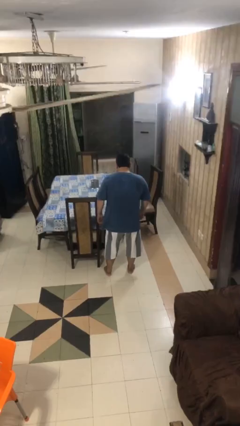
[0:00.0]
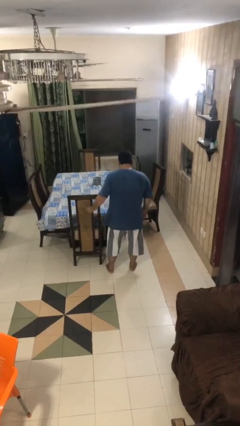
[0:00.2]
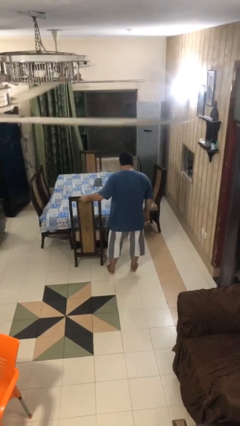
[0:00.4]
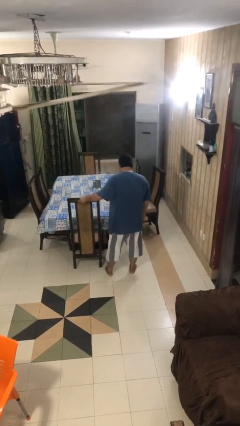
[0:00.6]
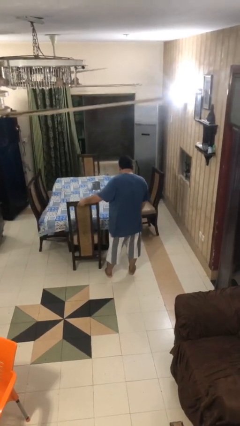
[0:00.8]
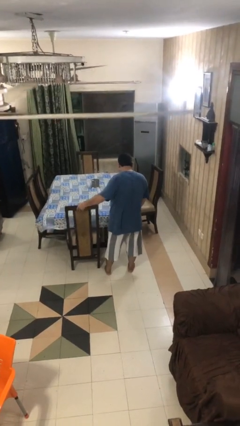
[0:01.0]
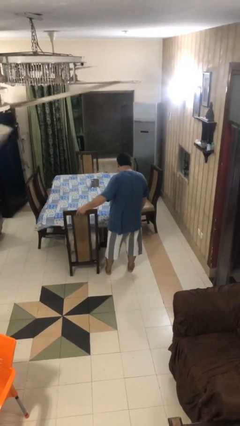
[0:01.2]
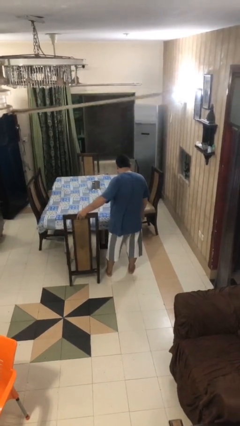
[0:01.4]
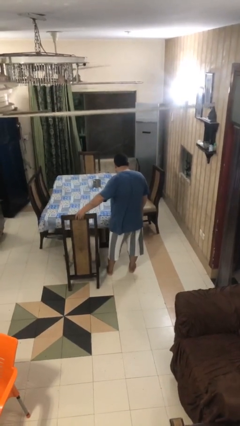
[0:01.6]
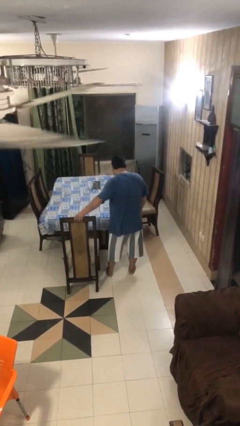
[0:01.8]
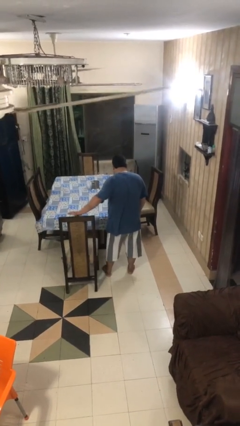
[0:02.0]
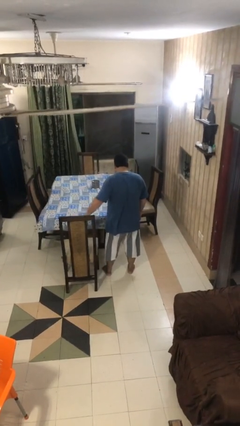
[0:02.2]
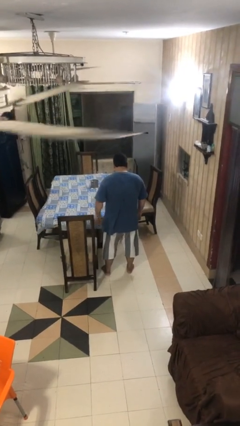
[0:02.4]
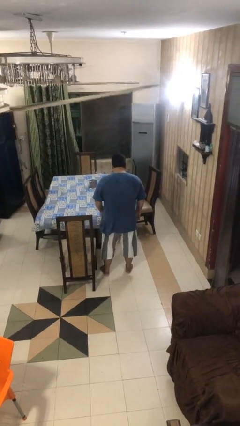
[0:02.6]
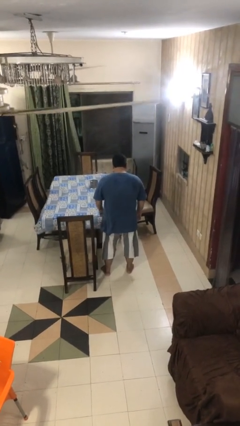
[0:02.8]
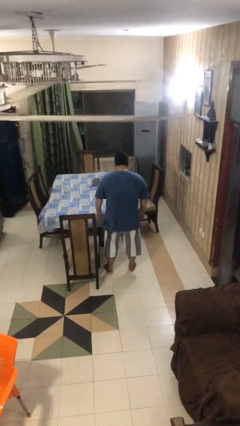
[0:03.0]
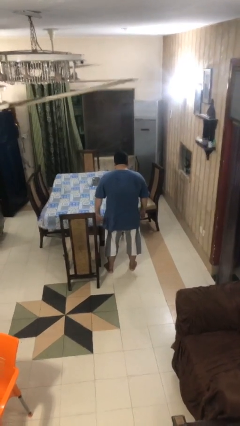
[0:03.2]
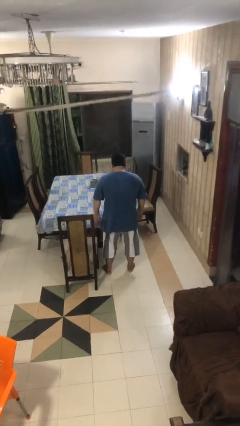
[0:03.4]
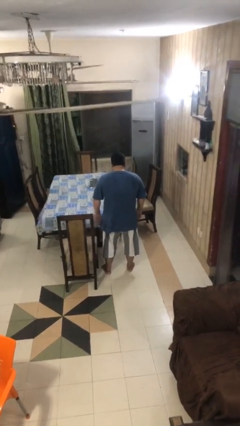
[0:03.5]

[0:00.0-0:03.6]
person pulls out chair

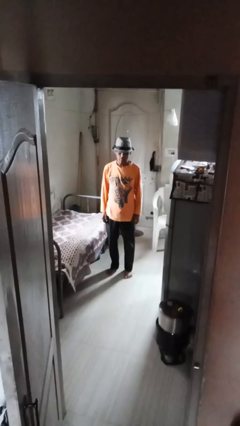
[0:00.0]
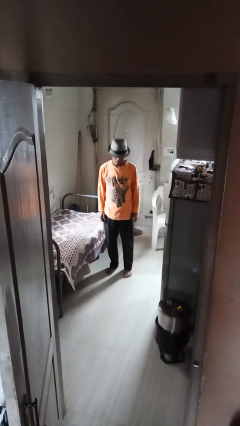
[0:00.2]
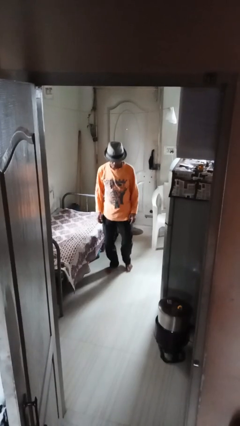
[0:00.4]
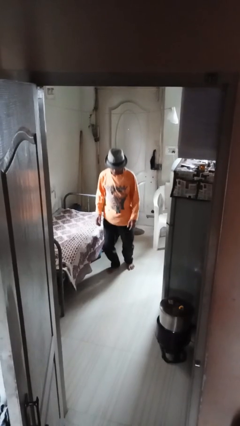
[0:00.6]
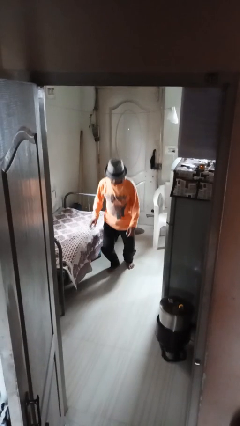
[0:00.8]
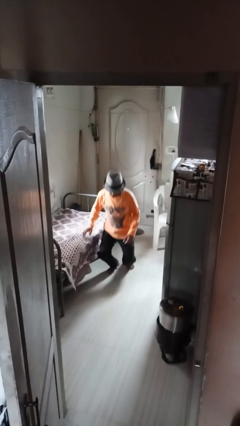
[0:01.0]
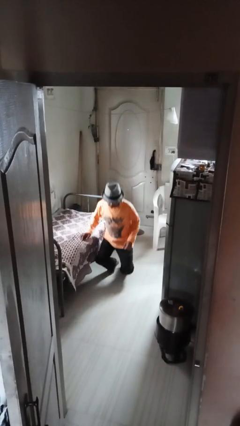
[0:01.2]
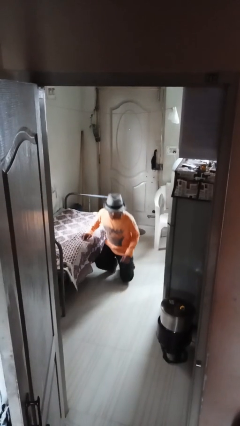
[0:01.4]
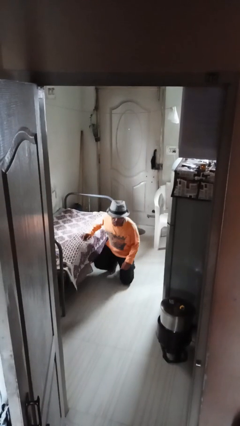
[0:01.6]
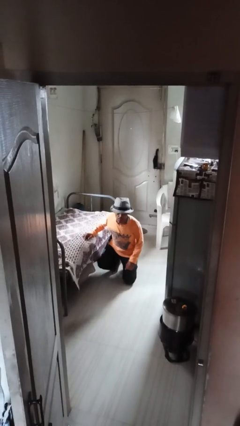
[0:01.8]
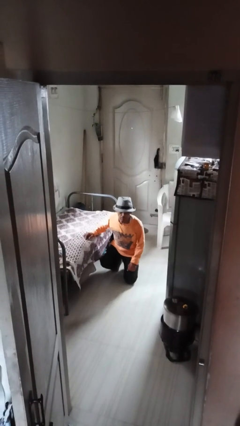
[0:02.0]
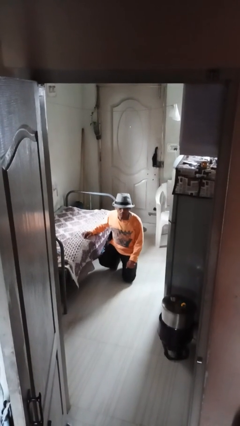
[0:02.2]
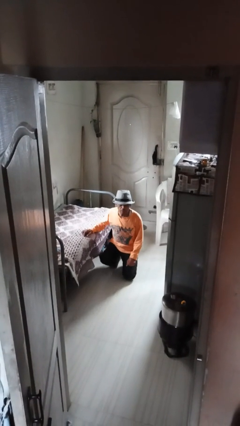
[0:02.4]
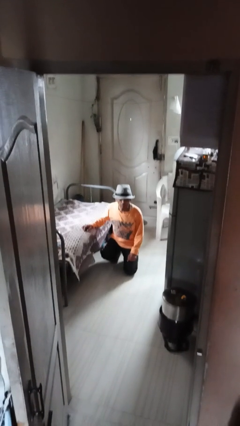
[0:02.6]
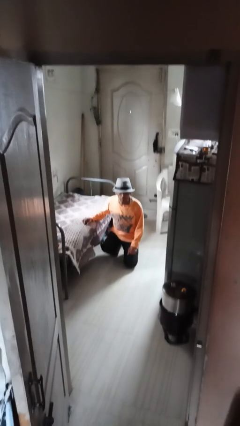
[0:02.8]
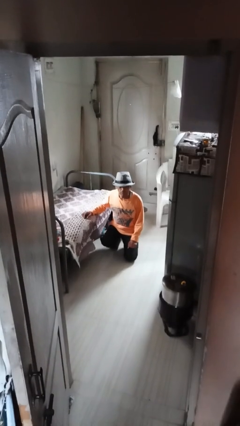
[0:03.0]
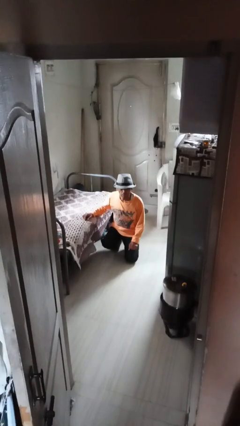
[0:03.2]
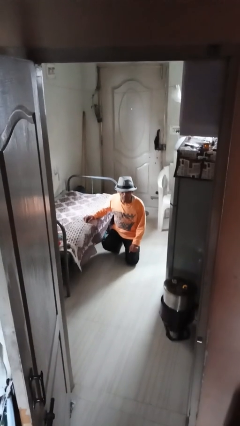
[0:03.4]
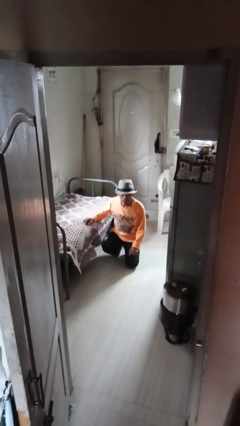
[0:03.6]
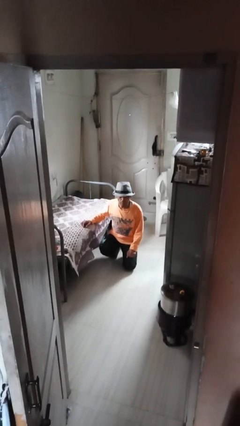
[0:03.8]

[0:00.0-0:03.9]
person kneels

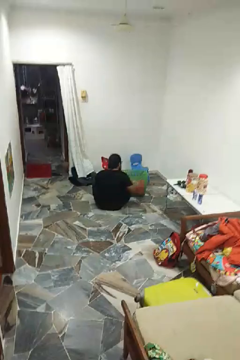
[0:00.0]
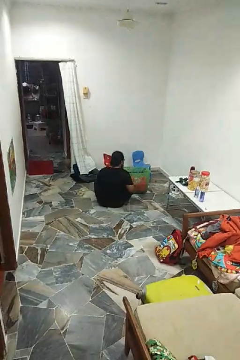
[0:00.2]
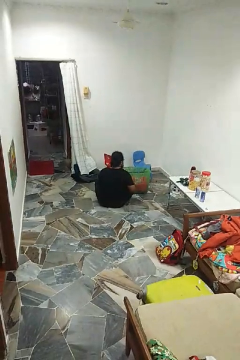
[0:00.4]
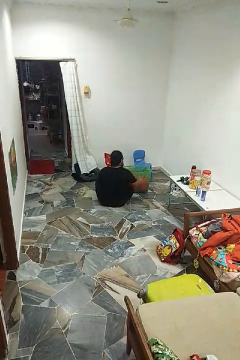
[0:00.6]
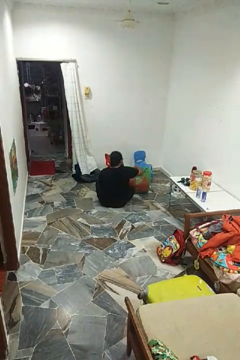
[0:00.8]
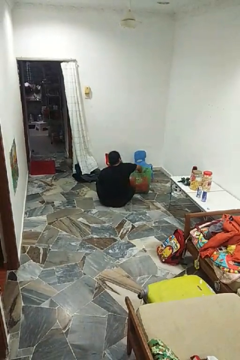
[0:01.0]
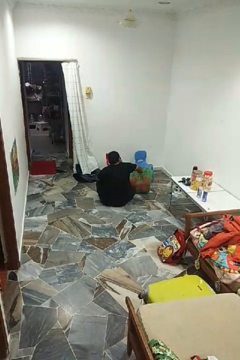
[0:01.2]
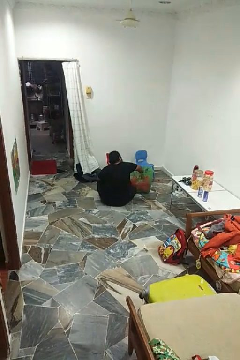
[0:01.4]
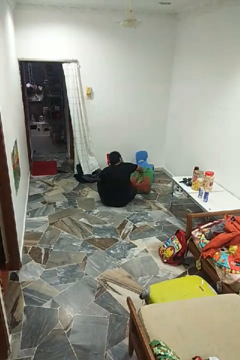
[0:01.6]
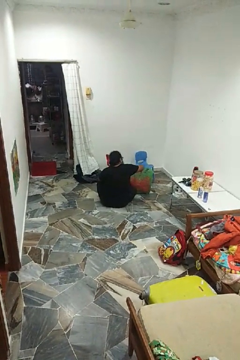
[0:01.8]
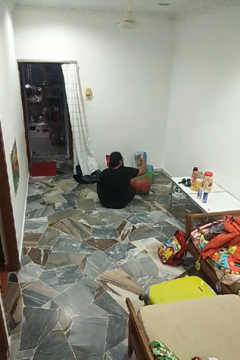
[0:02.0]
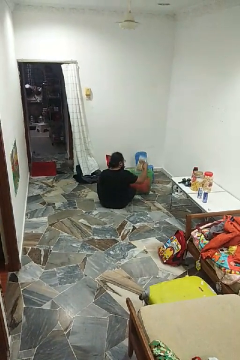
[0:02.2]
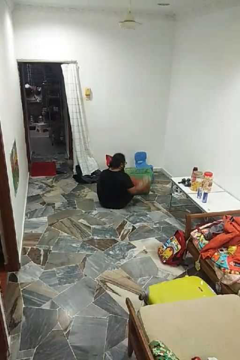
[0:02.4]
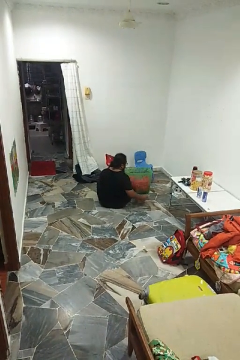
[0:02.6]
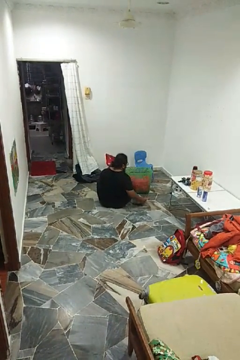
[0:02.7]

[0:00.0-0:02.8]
person takes object from basket

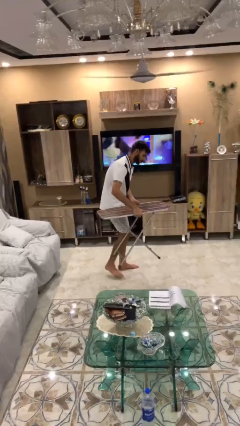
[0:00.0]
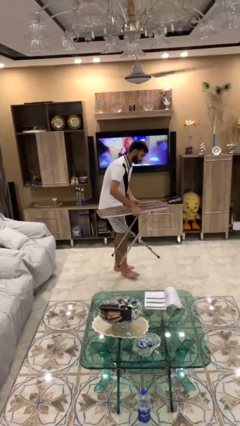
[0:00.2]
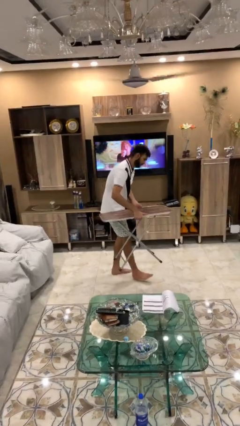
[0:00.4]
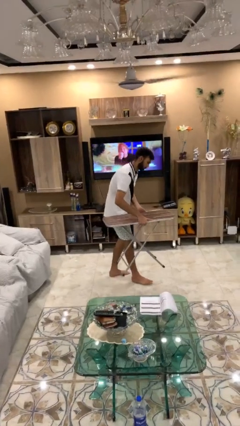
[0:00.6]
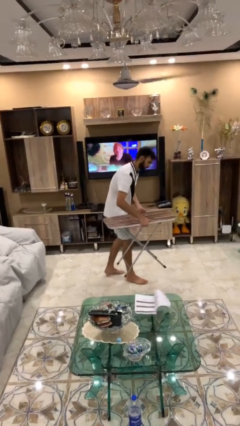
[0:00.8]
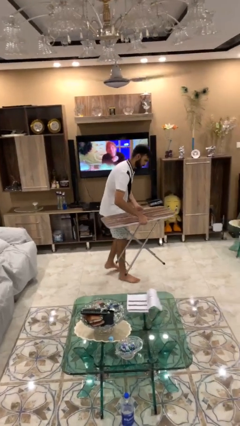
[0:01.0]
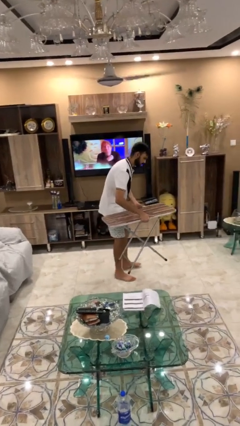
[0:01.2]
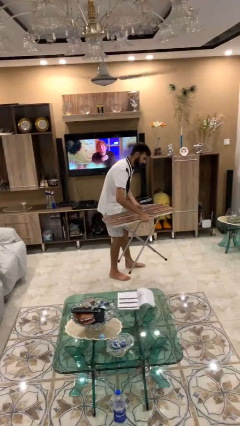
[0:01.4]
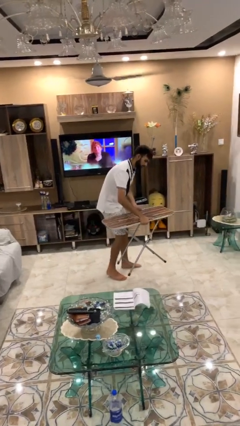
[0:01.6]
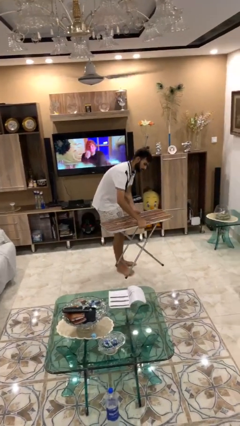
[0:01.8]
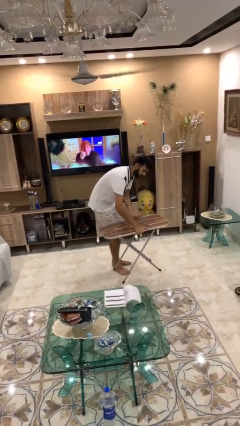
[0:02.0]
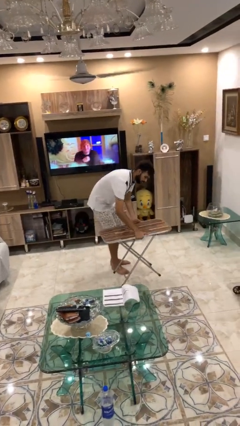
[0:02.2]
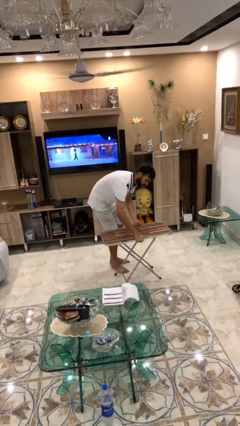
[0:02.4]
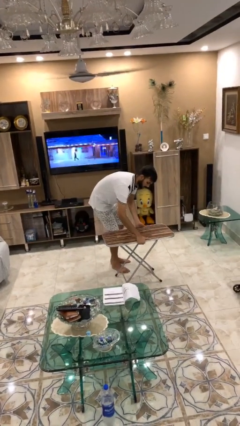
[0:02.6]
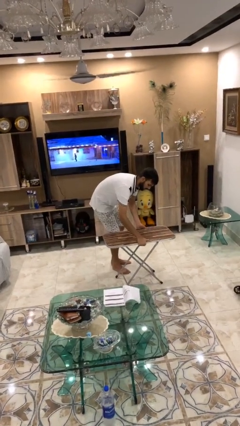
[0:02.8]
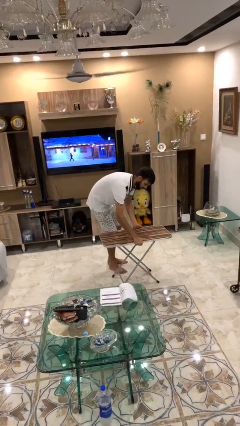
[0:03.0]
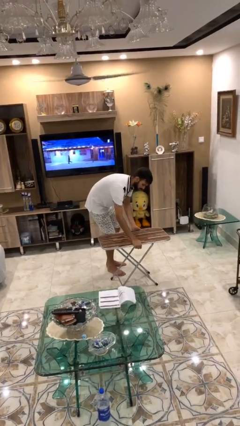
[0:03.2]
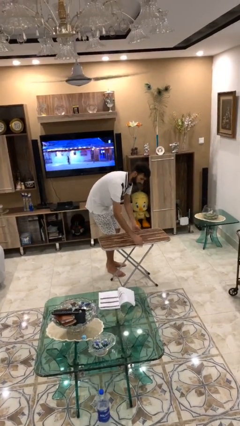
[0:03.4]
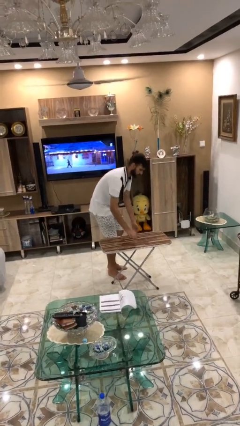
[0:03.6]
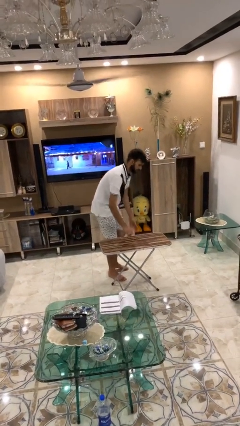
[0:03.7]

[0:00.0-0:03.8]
person puts down object on floor

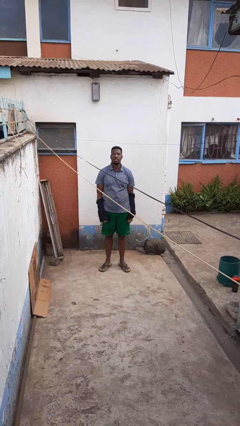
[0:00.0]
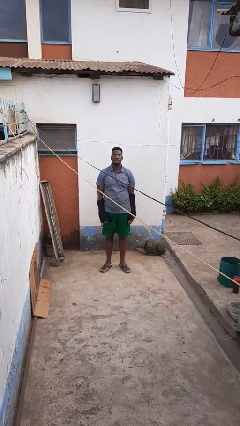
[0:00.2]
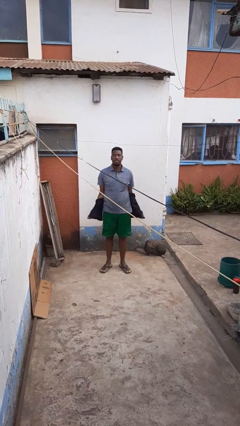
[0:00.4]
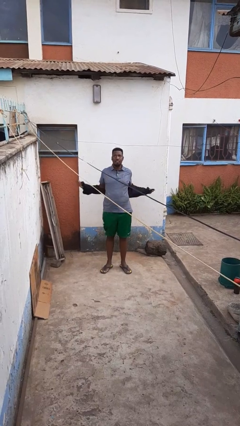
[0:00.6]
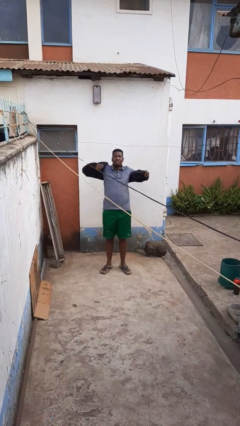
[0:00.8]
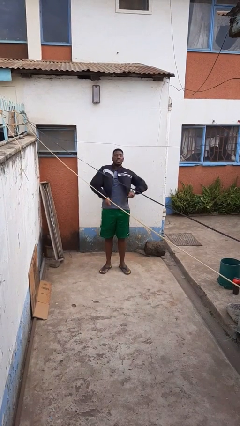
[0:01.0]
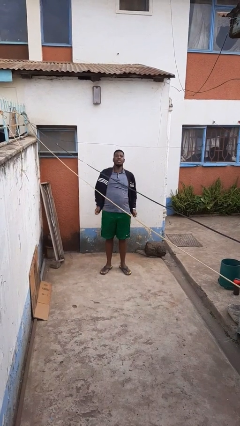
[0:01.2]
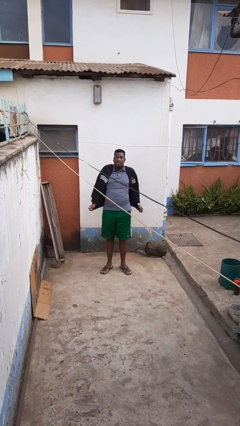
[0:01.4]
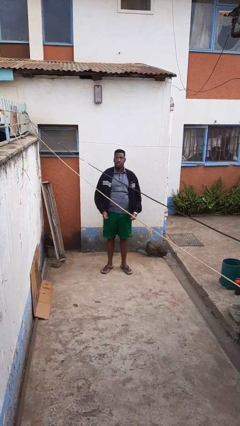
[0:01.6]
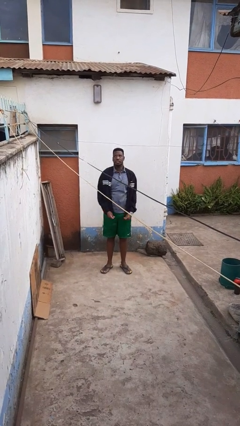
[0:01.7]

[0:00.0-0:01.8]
person puts on jacket

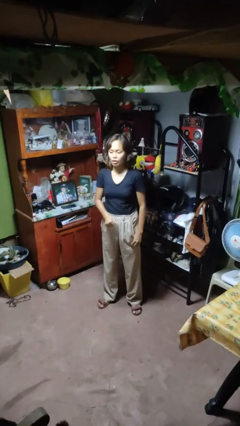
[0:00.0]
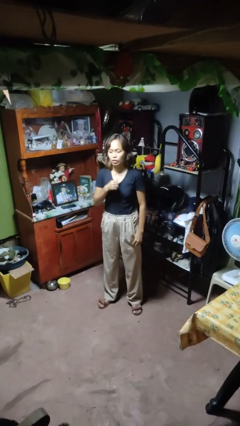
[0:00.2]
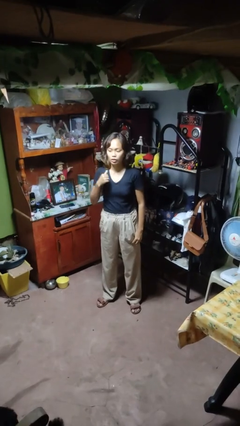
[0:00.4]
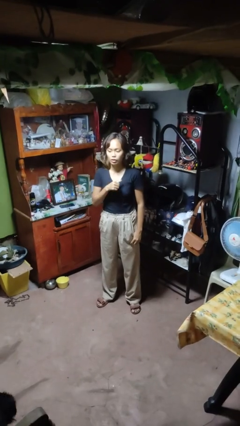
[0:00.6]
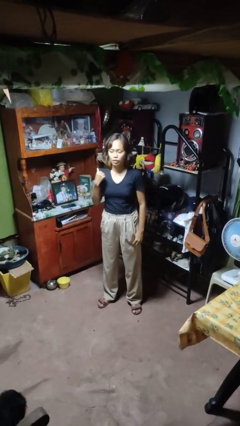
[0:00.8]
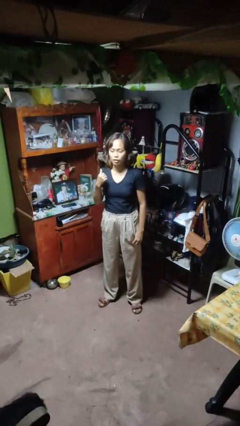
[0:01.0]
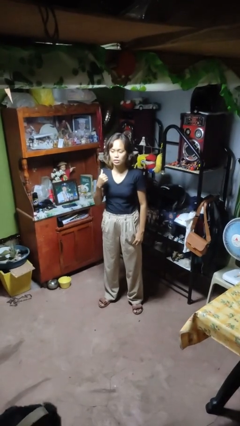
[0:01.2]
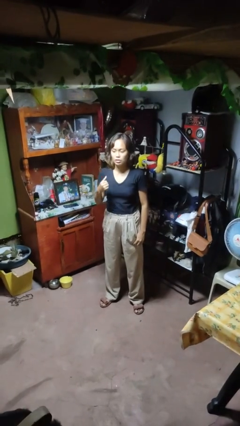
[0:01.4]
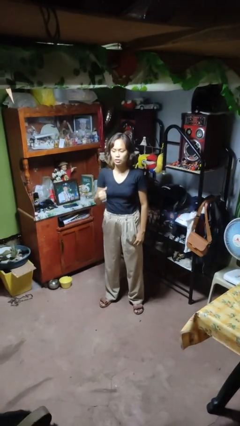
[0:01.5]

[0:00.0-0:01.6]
person gestures cut
